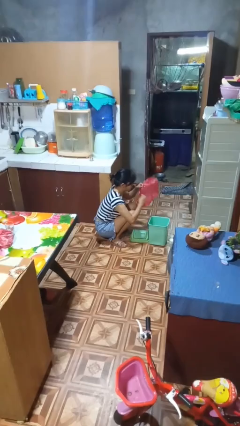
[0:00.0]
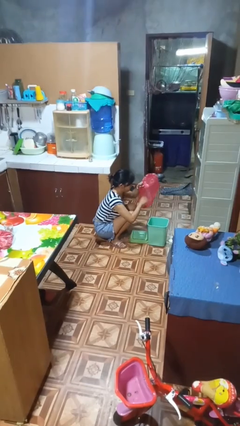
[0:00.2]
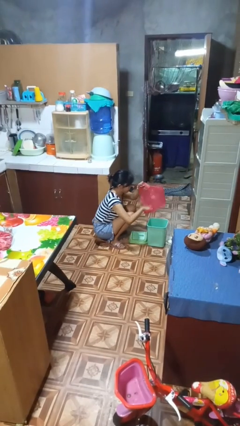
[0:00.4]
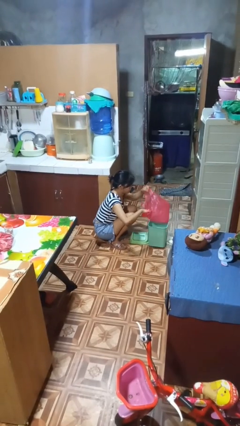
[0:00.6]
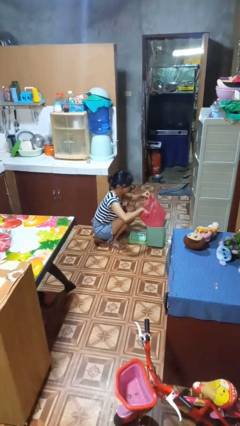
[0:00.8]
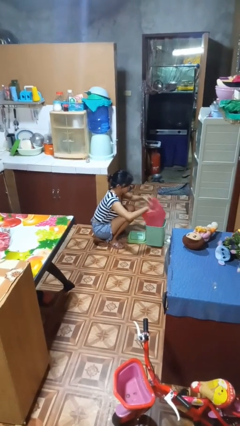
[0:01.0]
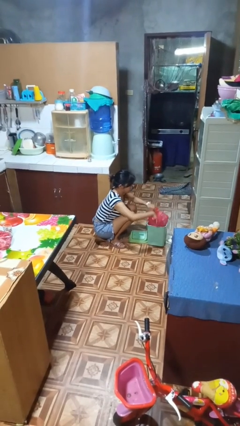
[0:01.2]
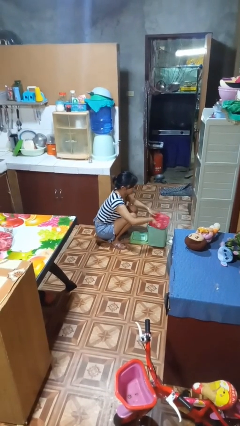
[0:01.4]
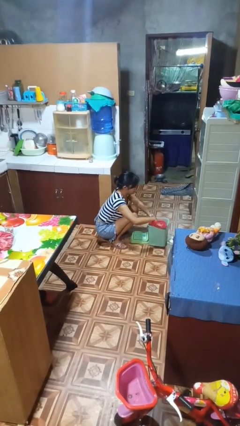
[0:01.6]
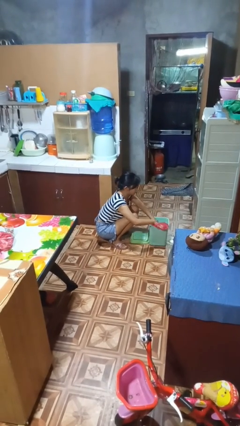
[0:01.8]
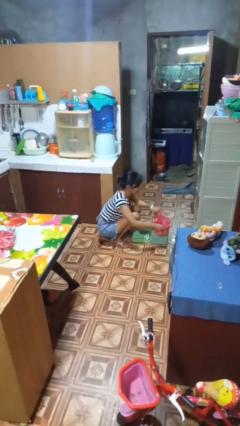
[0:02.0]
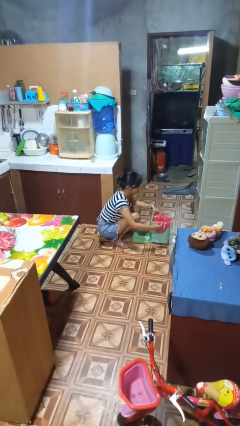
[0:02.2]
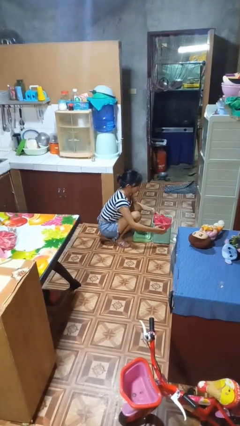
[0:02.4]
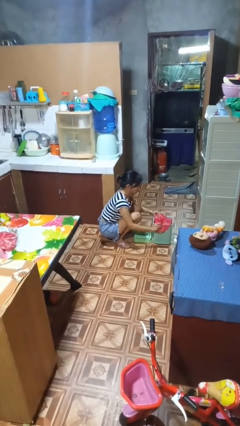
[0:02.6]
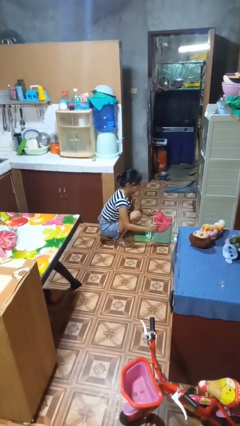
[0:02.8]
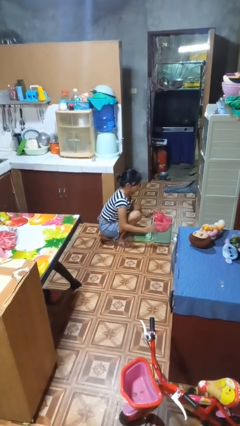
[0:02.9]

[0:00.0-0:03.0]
person inserts trashbag into trashcan

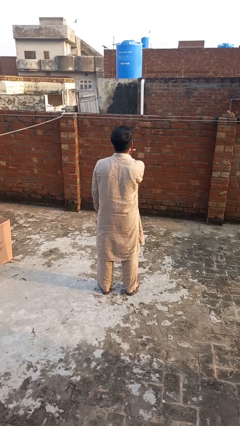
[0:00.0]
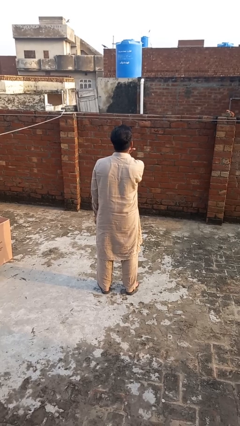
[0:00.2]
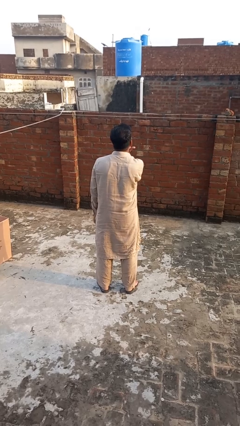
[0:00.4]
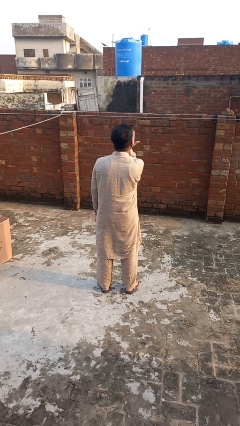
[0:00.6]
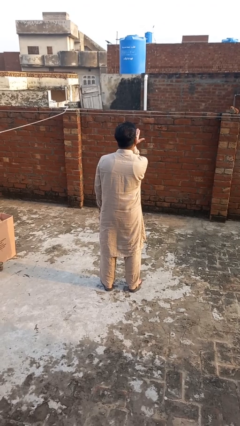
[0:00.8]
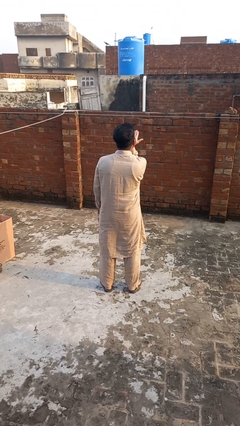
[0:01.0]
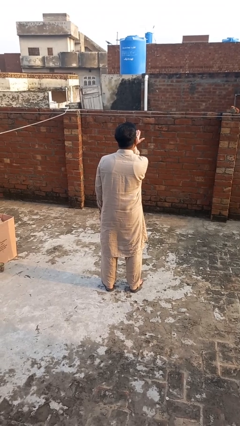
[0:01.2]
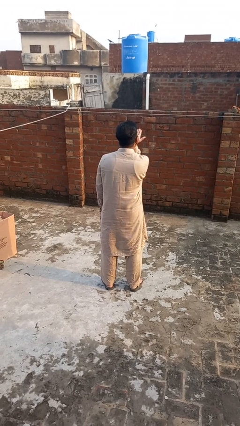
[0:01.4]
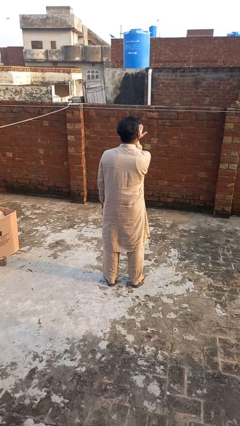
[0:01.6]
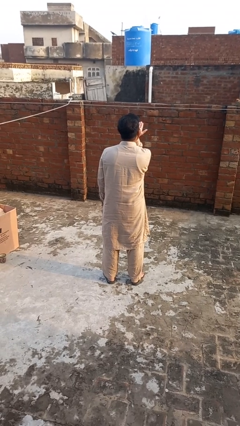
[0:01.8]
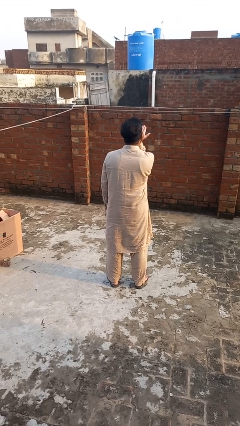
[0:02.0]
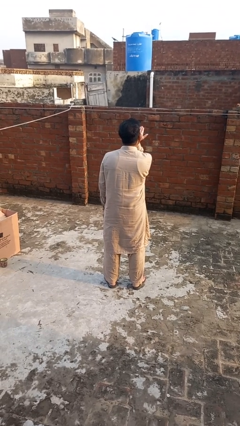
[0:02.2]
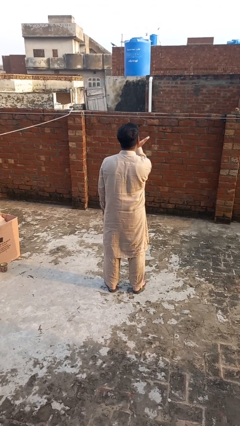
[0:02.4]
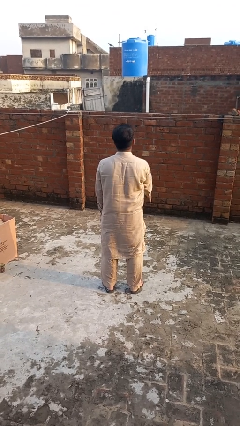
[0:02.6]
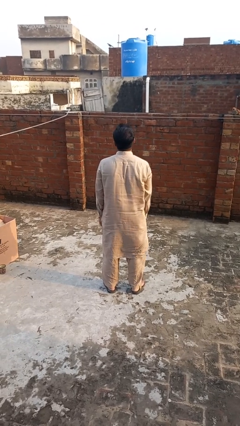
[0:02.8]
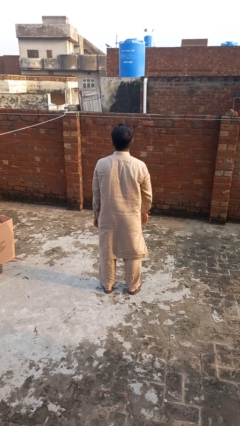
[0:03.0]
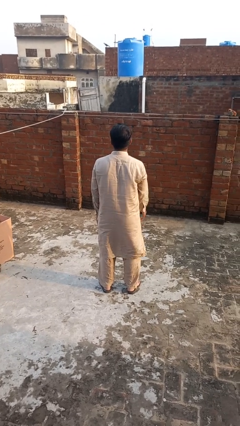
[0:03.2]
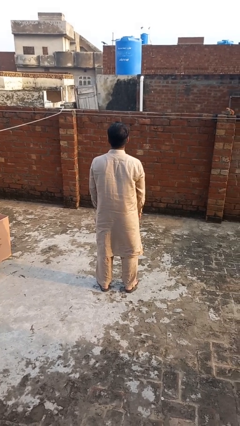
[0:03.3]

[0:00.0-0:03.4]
person gestures blow kiss

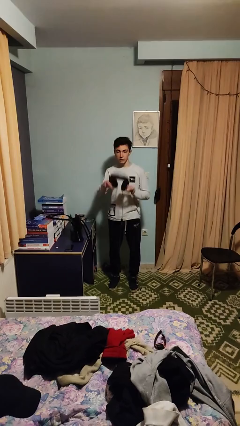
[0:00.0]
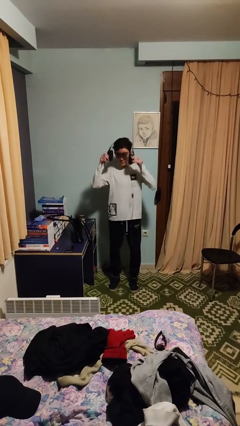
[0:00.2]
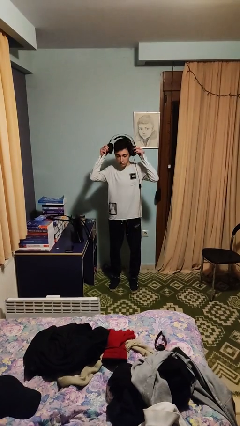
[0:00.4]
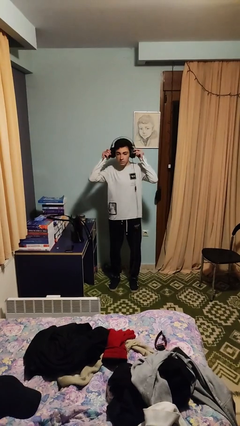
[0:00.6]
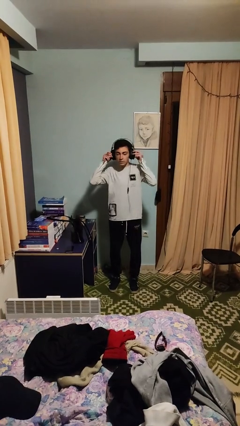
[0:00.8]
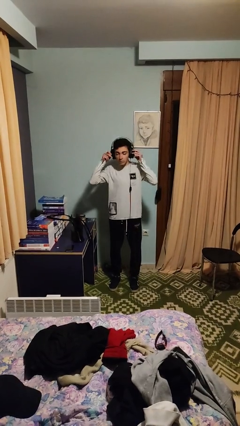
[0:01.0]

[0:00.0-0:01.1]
person puts on headphones

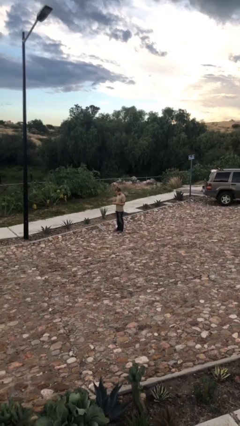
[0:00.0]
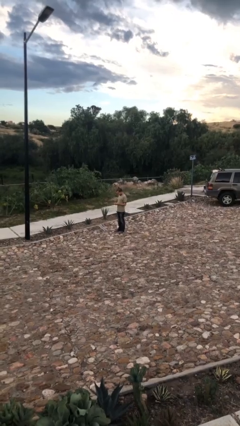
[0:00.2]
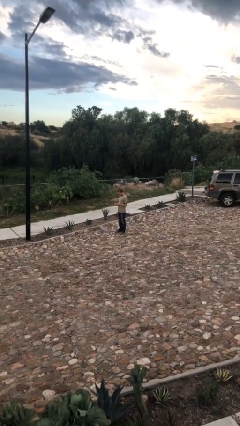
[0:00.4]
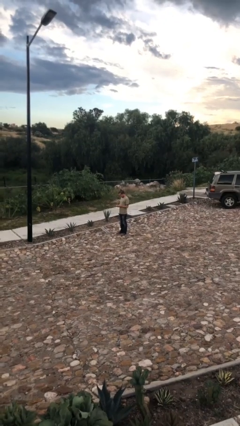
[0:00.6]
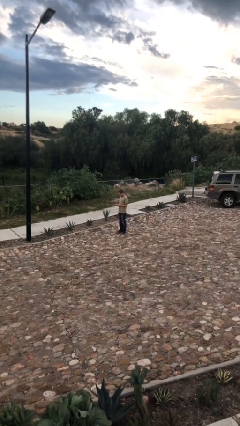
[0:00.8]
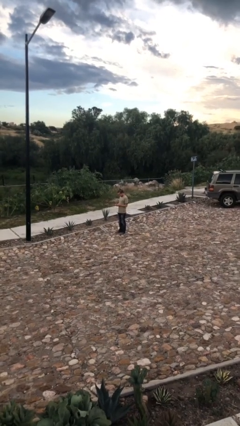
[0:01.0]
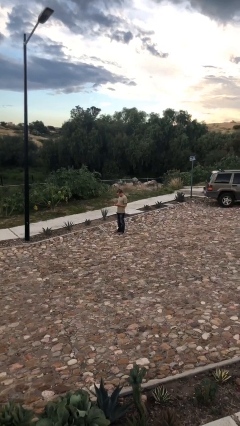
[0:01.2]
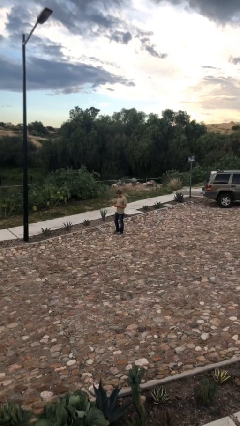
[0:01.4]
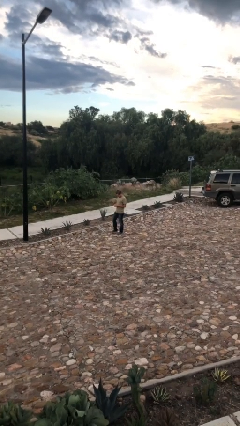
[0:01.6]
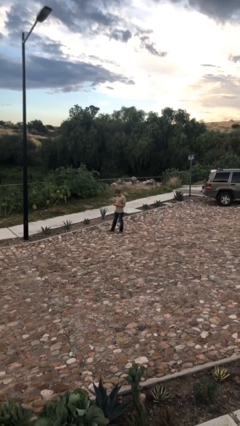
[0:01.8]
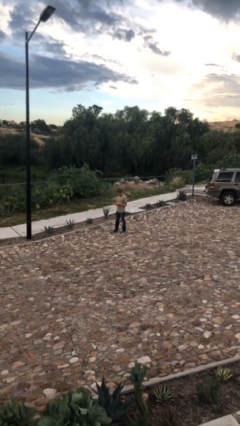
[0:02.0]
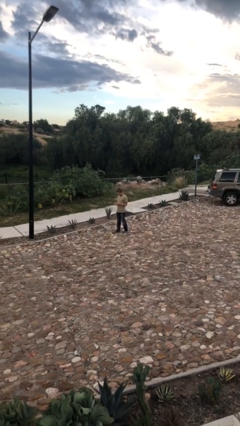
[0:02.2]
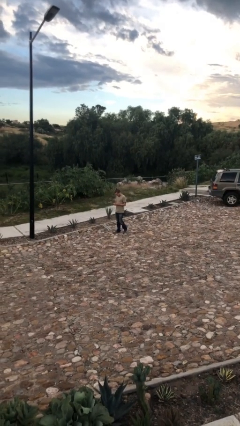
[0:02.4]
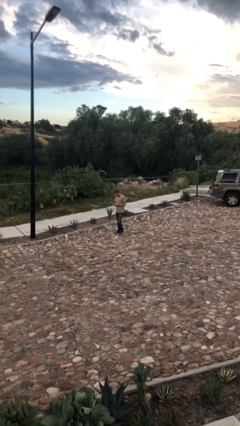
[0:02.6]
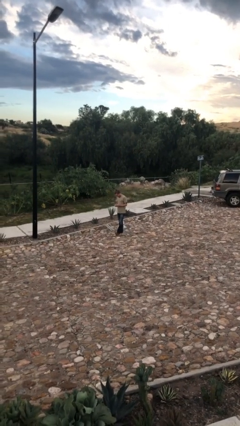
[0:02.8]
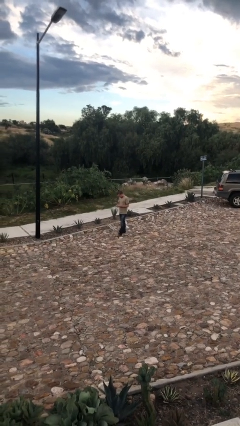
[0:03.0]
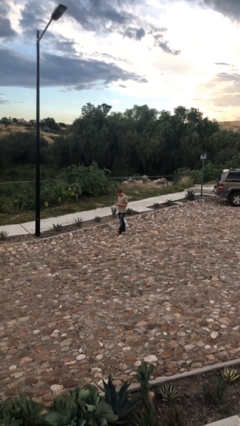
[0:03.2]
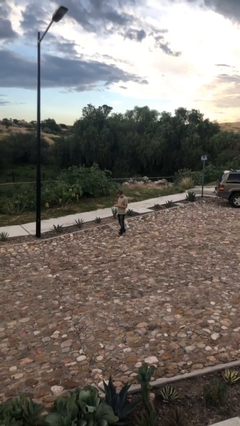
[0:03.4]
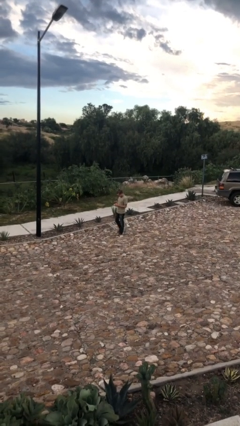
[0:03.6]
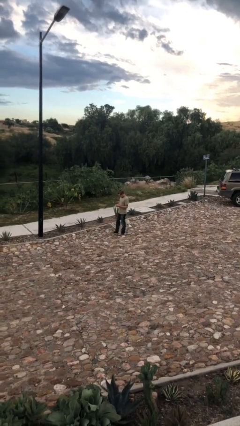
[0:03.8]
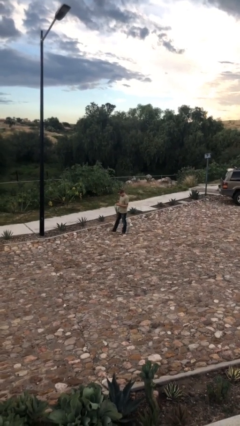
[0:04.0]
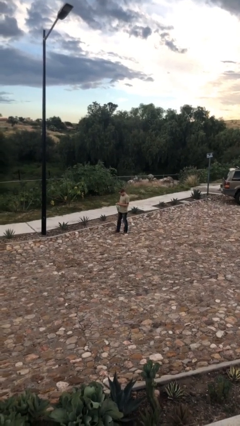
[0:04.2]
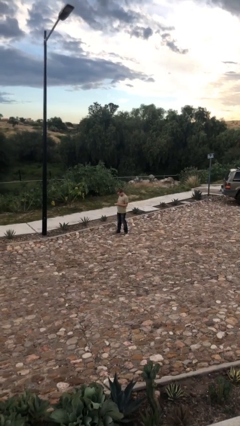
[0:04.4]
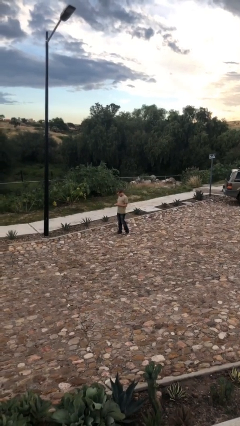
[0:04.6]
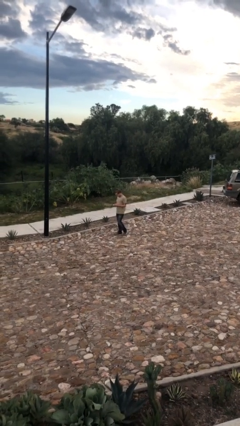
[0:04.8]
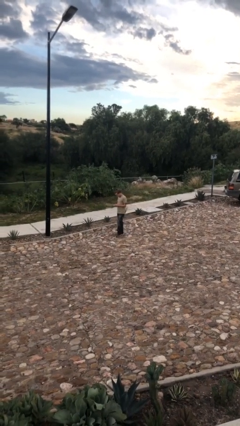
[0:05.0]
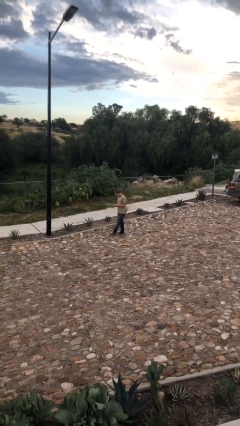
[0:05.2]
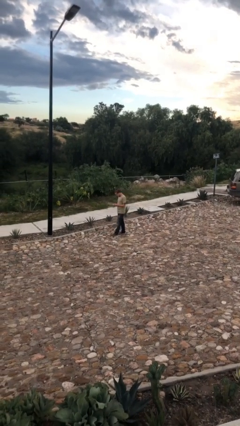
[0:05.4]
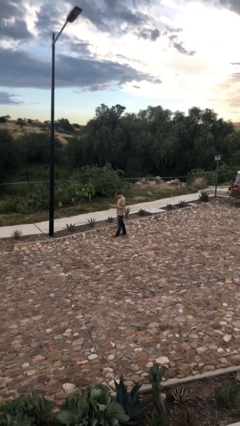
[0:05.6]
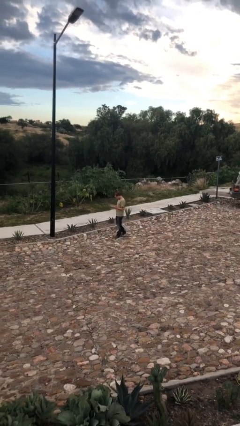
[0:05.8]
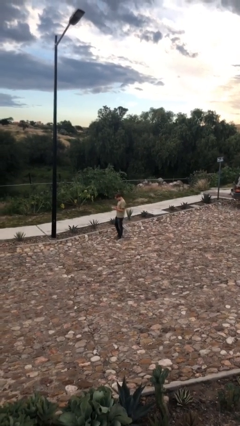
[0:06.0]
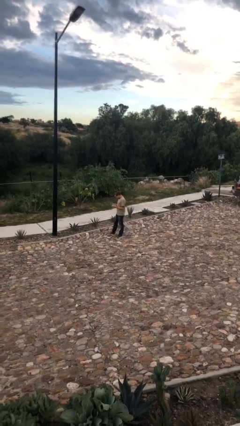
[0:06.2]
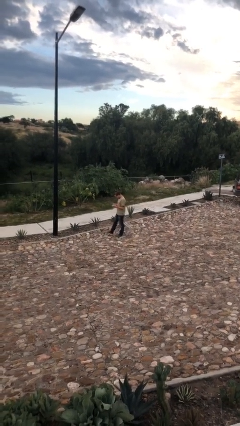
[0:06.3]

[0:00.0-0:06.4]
person texts on phone

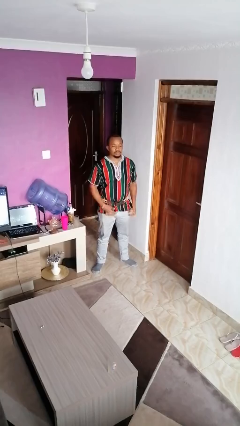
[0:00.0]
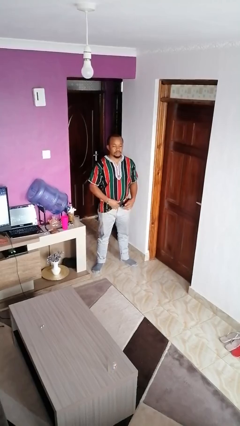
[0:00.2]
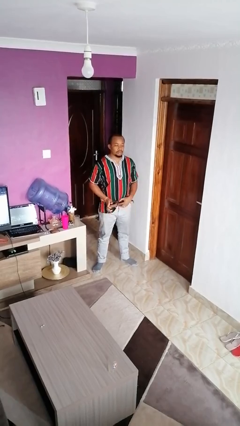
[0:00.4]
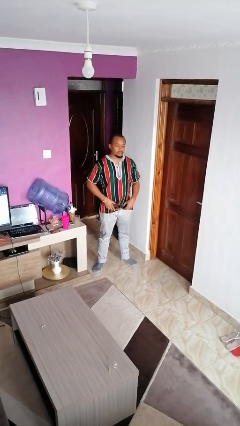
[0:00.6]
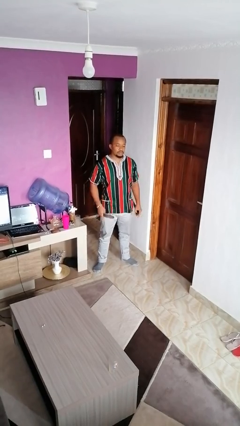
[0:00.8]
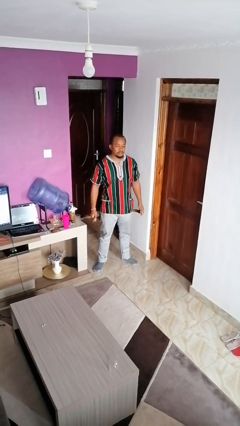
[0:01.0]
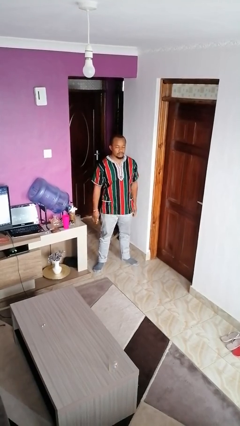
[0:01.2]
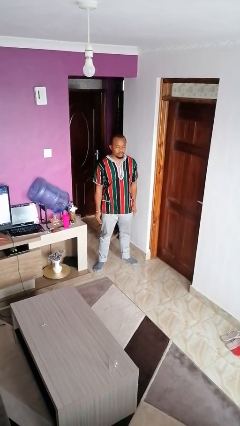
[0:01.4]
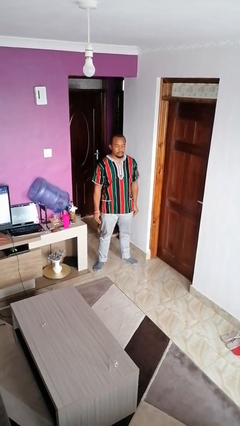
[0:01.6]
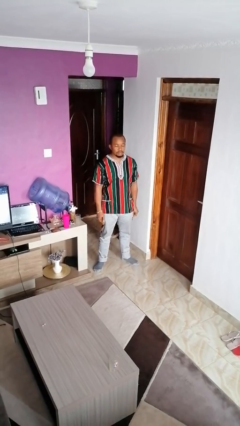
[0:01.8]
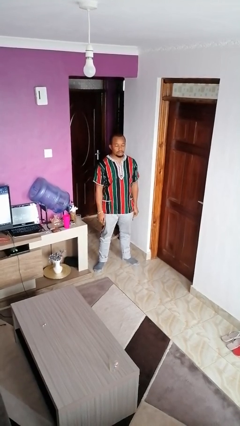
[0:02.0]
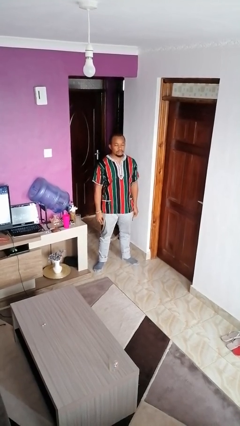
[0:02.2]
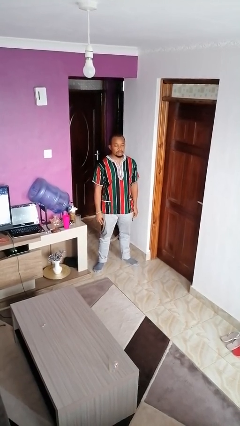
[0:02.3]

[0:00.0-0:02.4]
person takes off belt

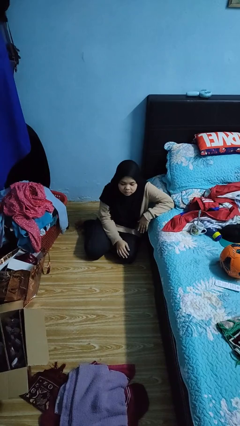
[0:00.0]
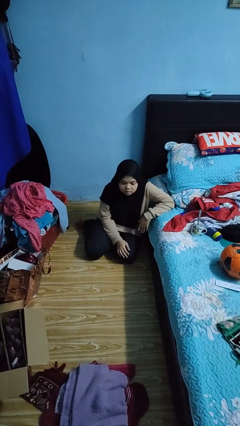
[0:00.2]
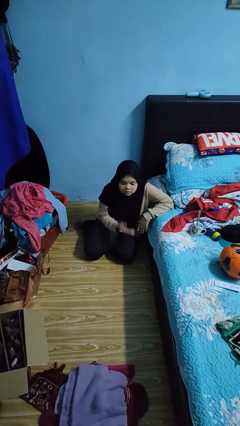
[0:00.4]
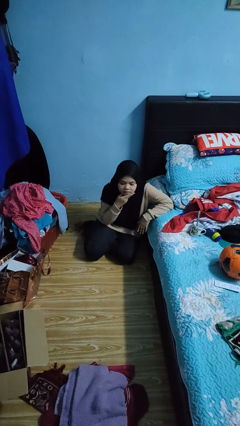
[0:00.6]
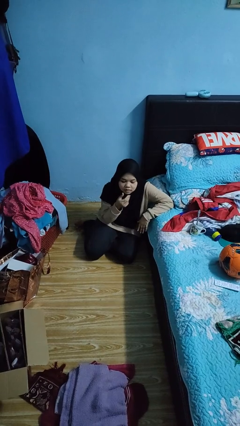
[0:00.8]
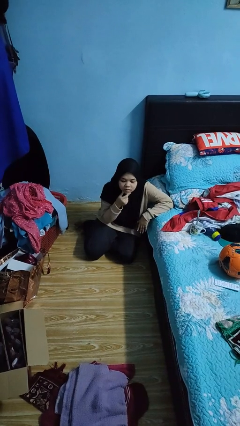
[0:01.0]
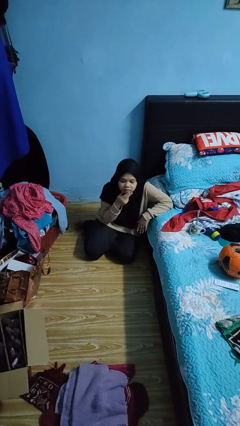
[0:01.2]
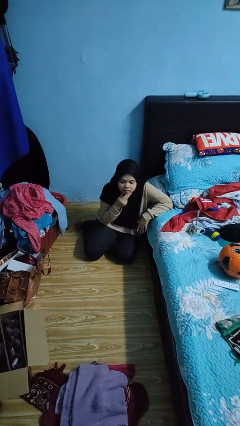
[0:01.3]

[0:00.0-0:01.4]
person strokes chin
